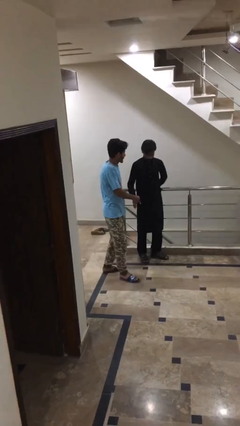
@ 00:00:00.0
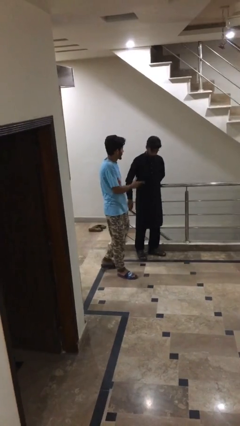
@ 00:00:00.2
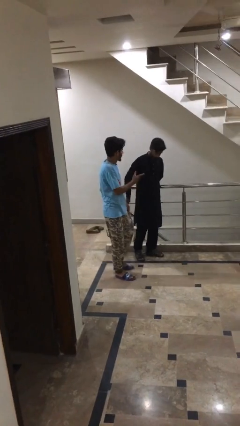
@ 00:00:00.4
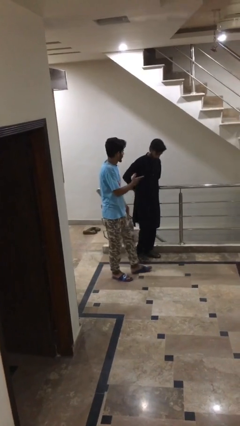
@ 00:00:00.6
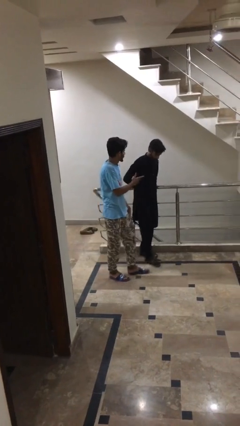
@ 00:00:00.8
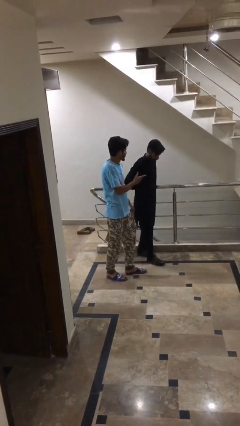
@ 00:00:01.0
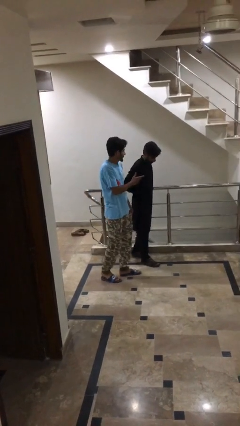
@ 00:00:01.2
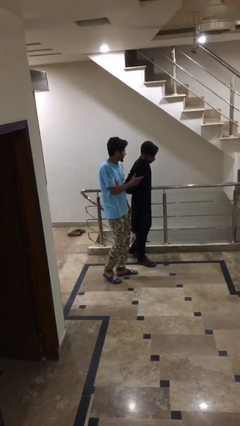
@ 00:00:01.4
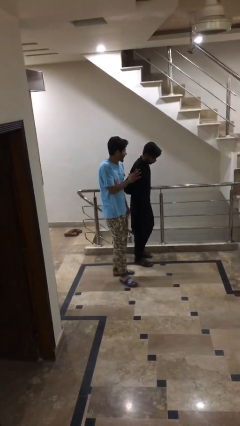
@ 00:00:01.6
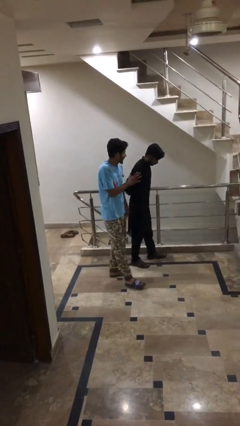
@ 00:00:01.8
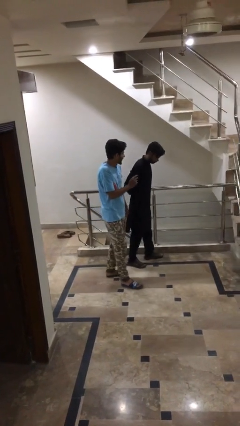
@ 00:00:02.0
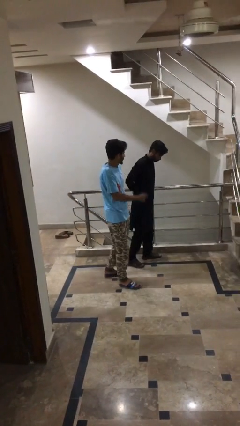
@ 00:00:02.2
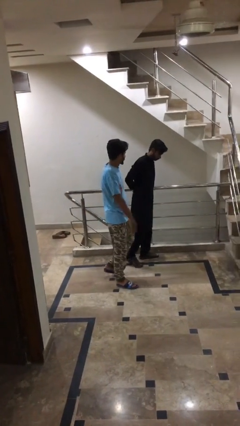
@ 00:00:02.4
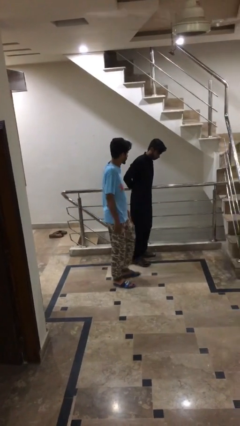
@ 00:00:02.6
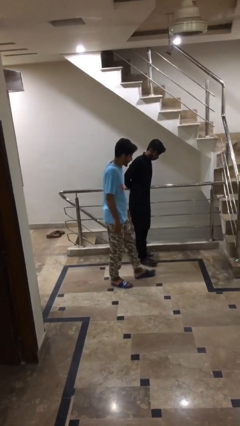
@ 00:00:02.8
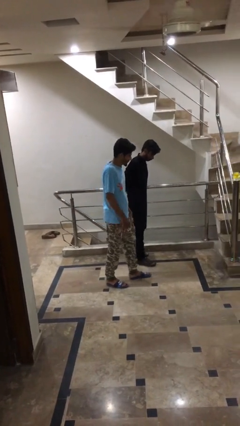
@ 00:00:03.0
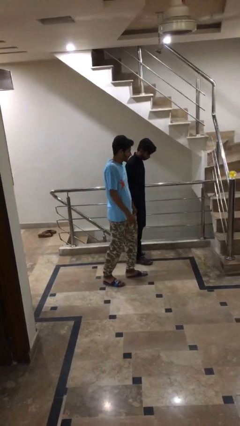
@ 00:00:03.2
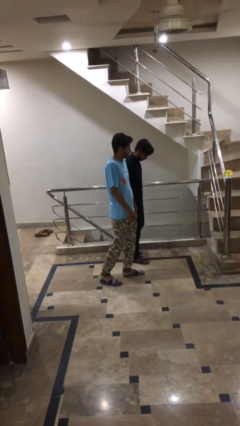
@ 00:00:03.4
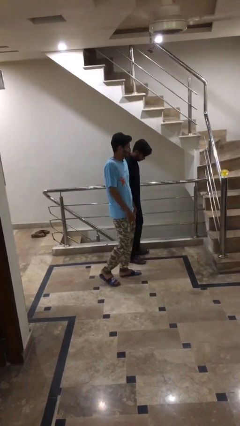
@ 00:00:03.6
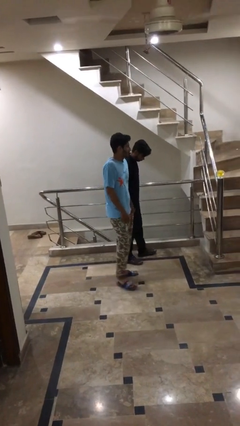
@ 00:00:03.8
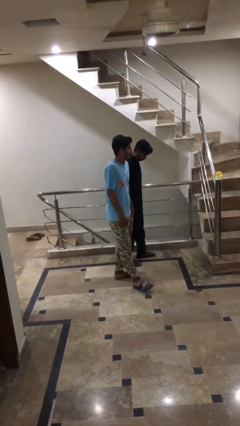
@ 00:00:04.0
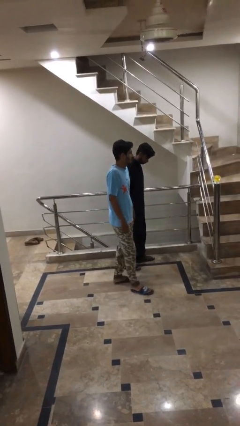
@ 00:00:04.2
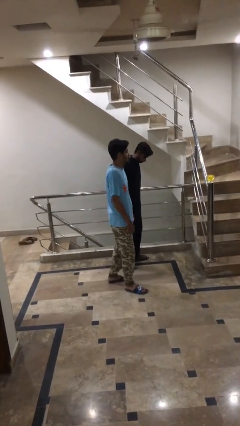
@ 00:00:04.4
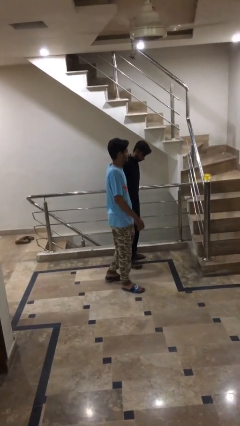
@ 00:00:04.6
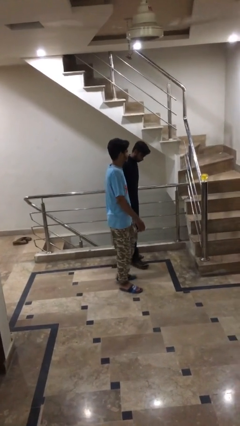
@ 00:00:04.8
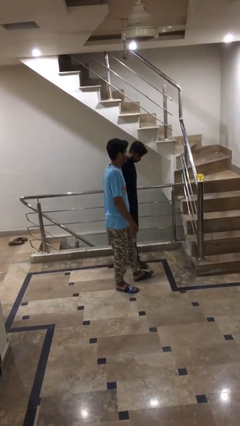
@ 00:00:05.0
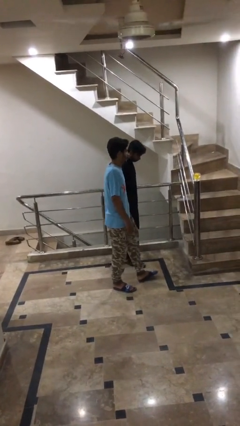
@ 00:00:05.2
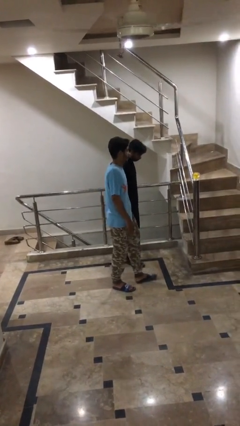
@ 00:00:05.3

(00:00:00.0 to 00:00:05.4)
person talks to person

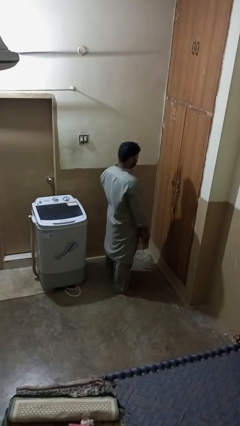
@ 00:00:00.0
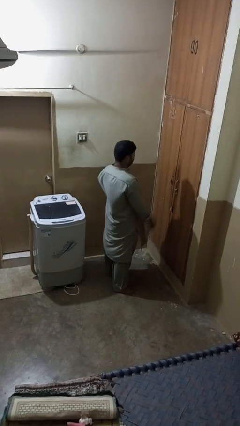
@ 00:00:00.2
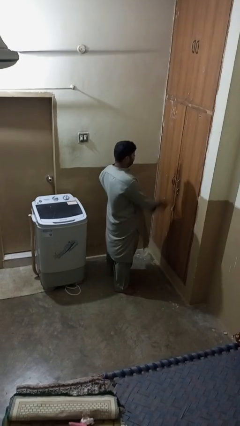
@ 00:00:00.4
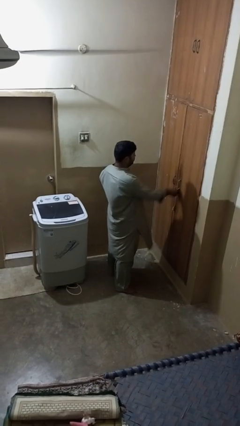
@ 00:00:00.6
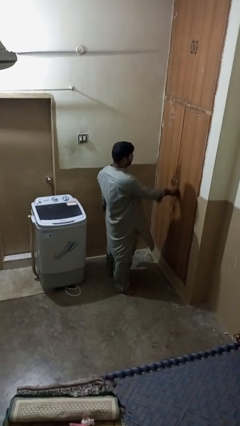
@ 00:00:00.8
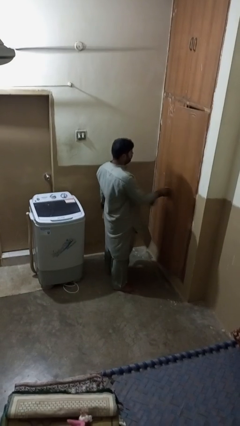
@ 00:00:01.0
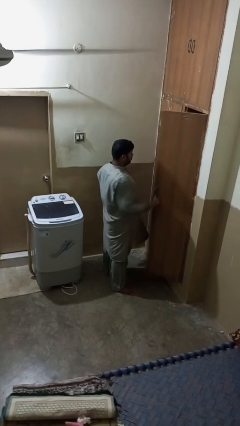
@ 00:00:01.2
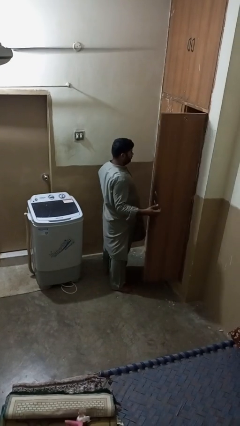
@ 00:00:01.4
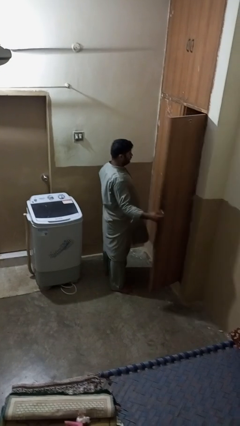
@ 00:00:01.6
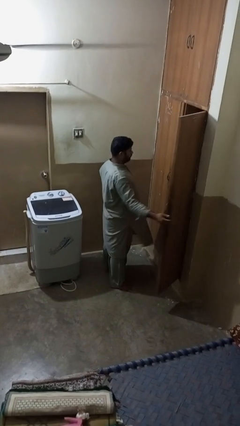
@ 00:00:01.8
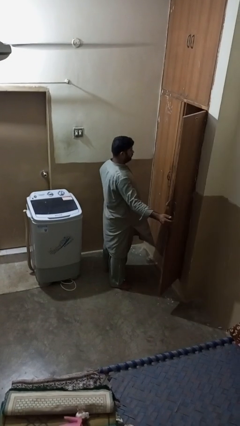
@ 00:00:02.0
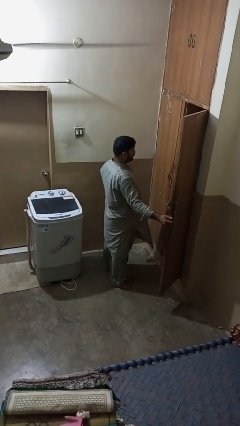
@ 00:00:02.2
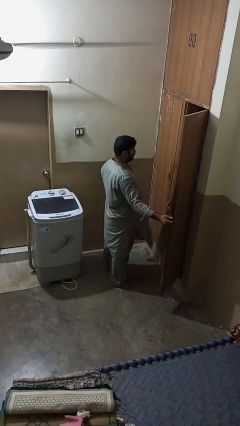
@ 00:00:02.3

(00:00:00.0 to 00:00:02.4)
person opens closet door

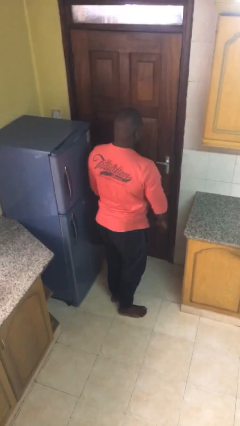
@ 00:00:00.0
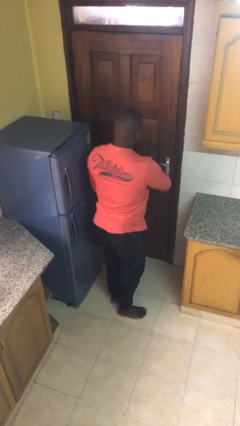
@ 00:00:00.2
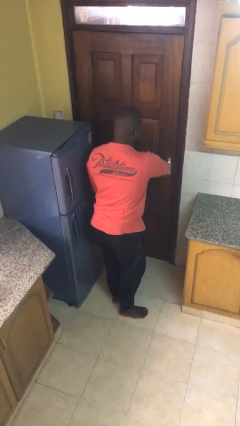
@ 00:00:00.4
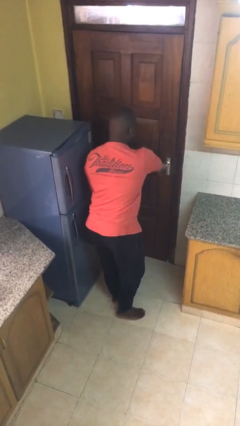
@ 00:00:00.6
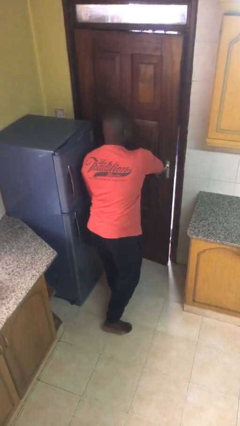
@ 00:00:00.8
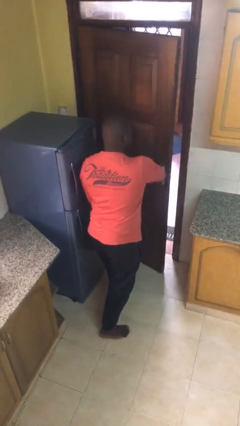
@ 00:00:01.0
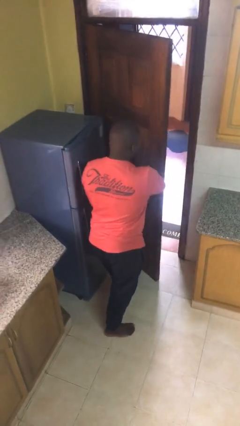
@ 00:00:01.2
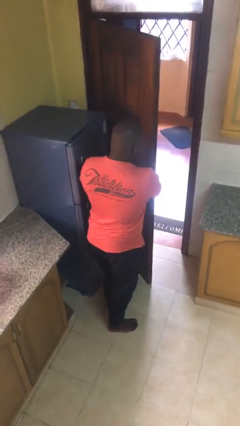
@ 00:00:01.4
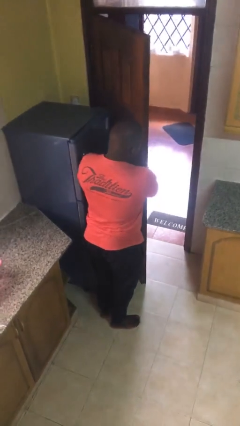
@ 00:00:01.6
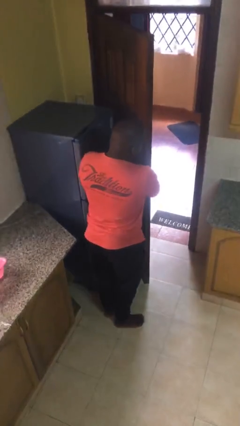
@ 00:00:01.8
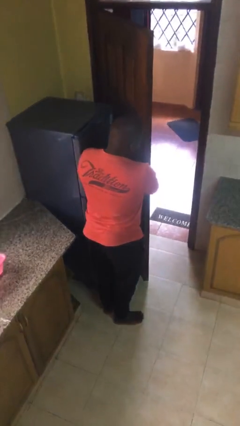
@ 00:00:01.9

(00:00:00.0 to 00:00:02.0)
person opens facility door

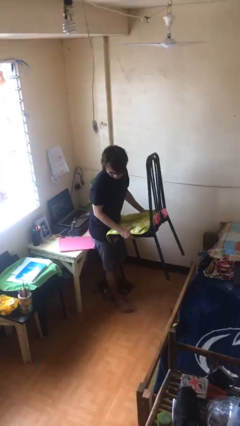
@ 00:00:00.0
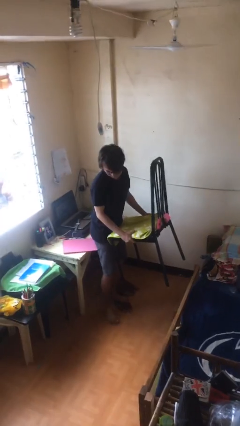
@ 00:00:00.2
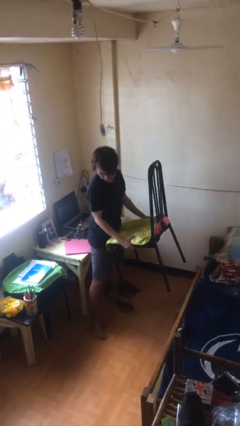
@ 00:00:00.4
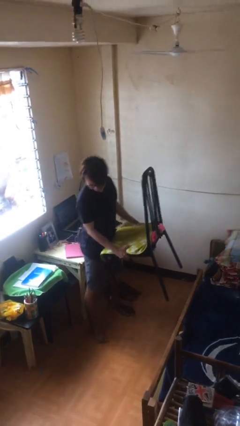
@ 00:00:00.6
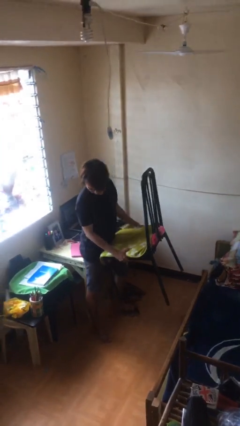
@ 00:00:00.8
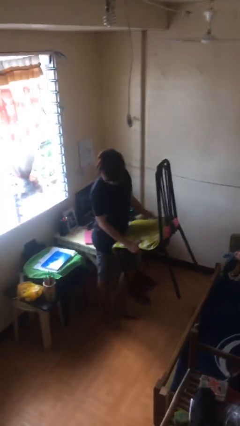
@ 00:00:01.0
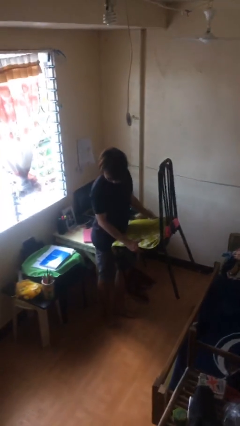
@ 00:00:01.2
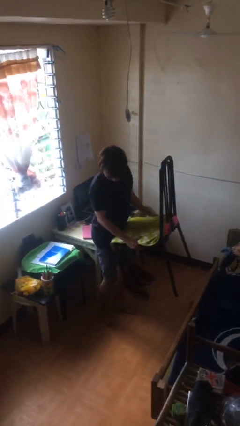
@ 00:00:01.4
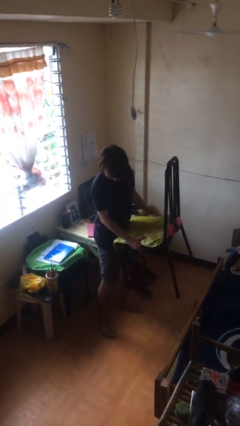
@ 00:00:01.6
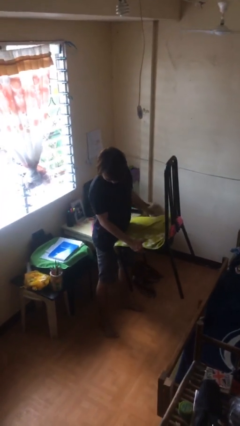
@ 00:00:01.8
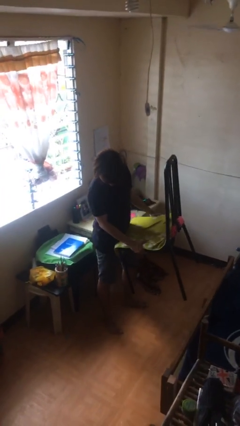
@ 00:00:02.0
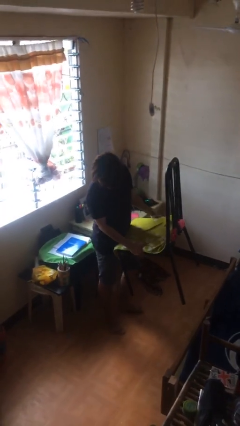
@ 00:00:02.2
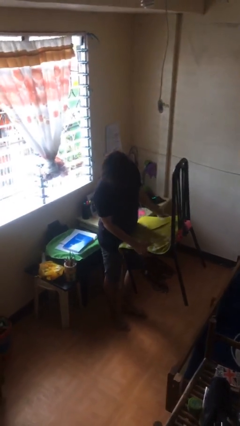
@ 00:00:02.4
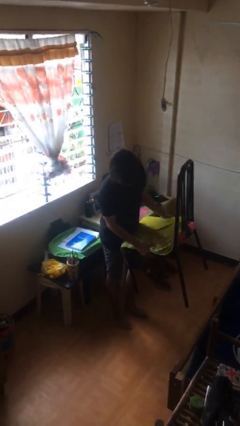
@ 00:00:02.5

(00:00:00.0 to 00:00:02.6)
person carries heavy object

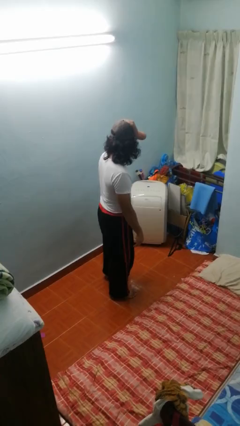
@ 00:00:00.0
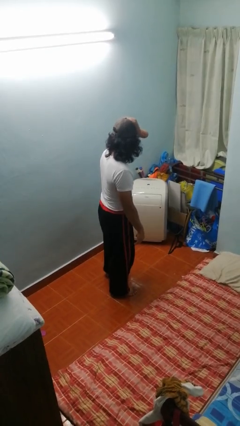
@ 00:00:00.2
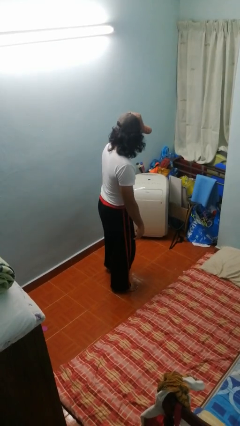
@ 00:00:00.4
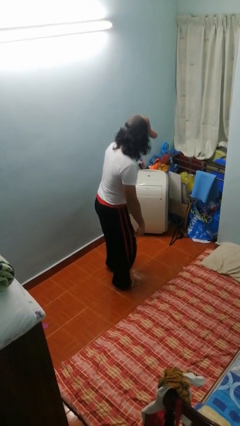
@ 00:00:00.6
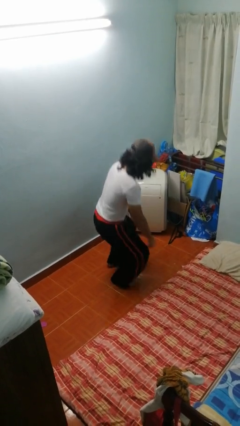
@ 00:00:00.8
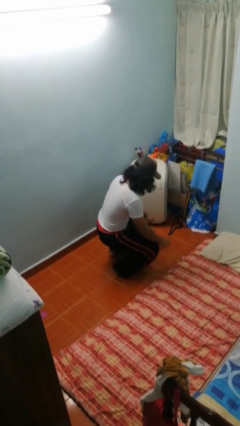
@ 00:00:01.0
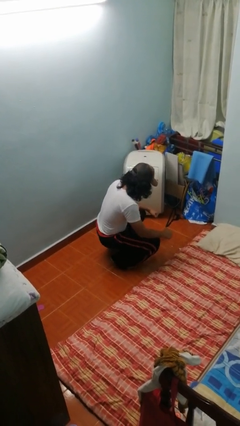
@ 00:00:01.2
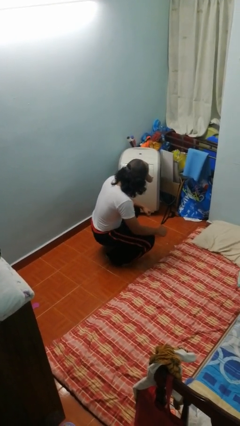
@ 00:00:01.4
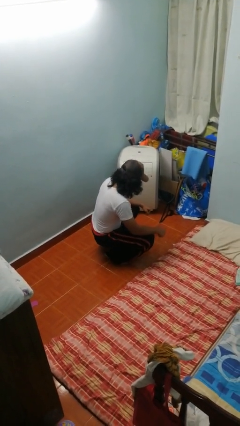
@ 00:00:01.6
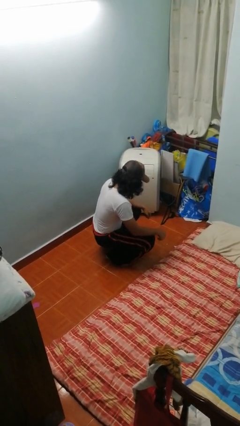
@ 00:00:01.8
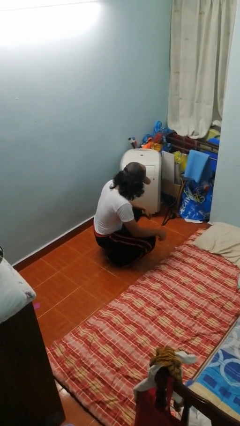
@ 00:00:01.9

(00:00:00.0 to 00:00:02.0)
person squats

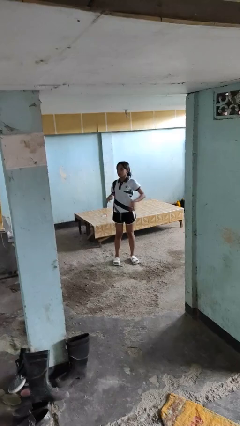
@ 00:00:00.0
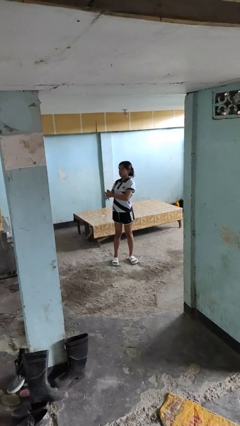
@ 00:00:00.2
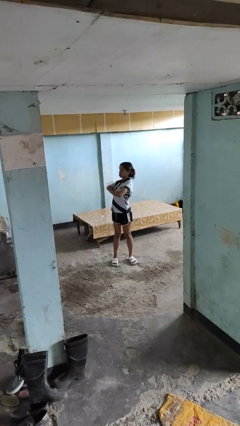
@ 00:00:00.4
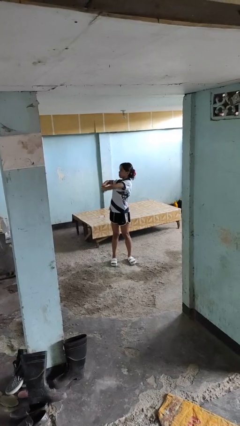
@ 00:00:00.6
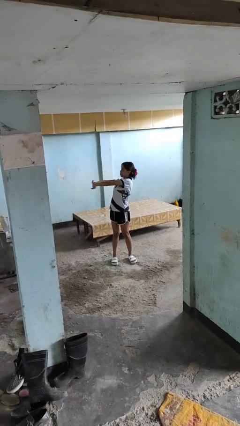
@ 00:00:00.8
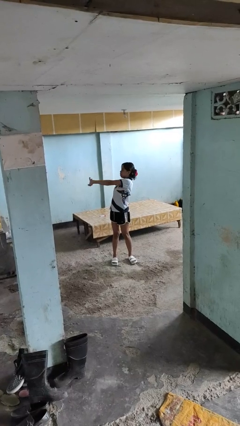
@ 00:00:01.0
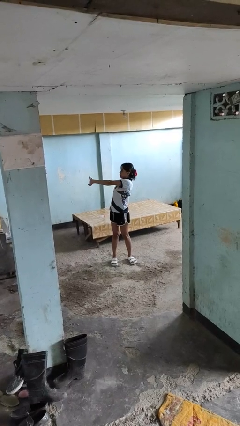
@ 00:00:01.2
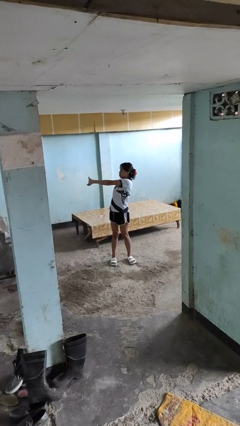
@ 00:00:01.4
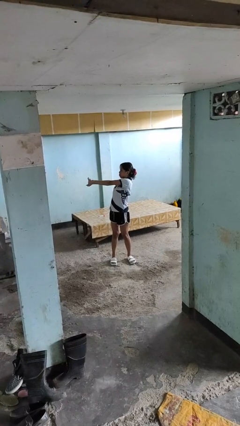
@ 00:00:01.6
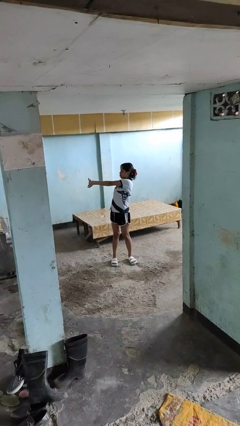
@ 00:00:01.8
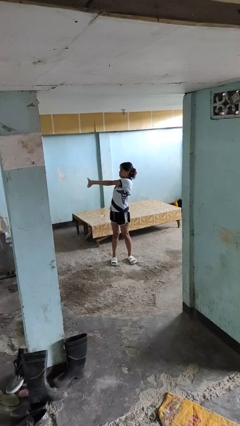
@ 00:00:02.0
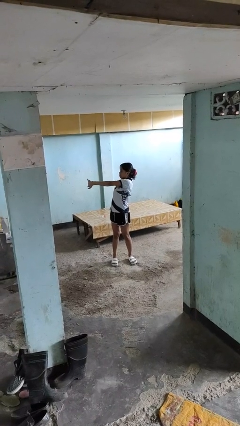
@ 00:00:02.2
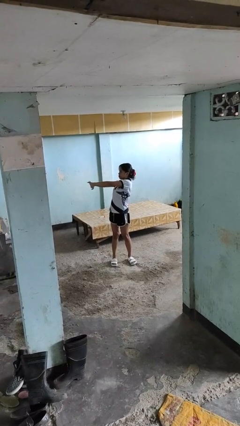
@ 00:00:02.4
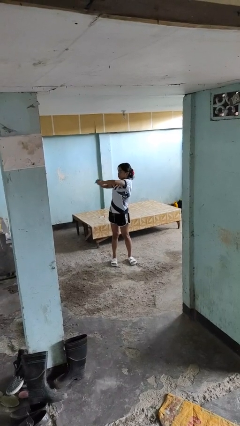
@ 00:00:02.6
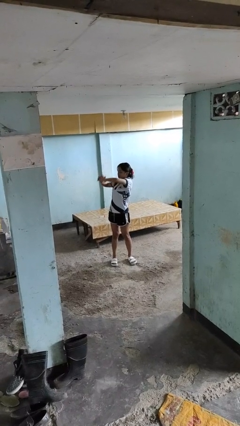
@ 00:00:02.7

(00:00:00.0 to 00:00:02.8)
person stretches arms to side
